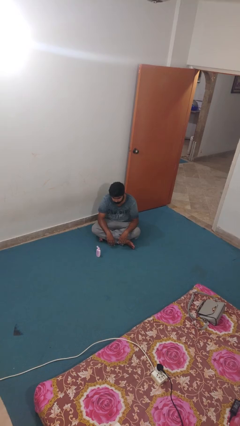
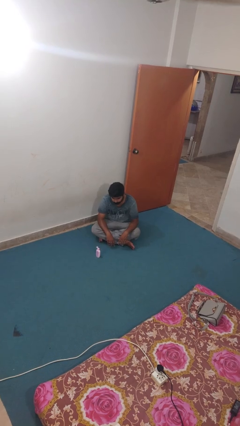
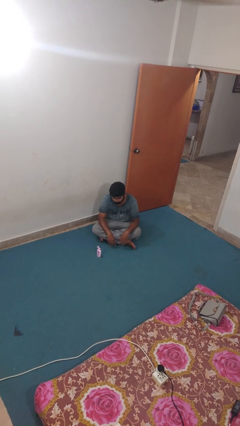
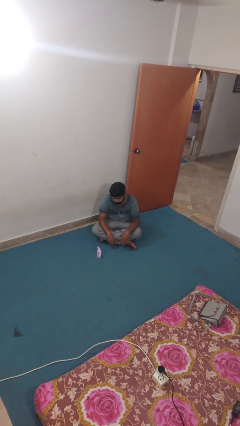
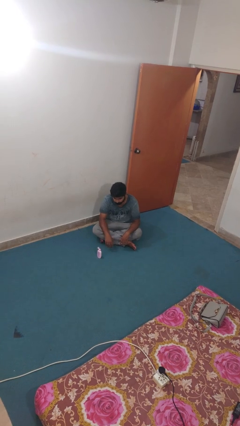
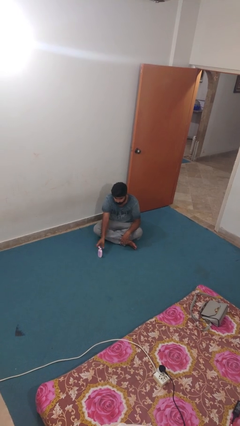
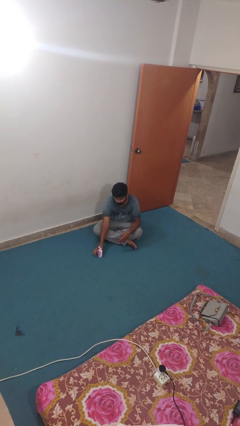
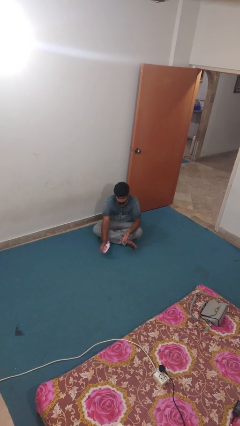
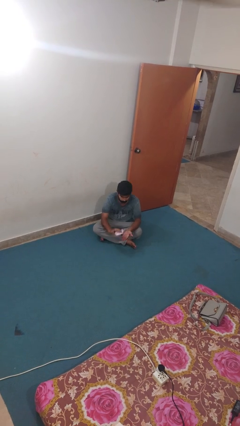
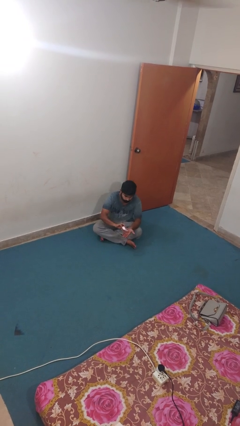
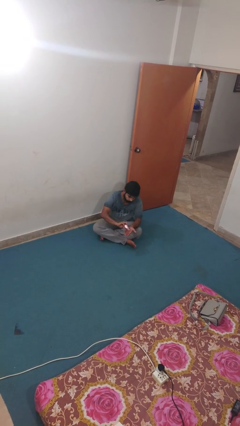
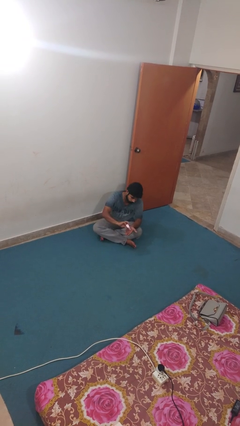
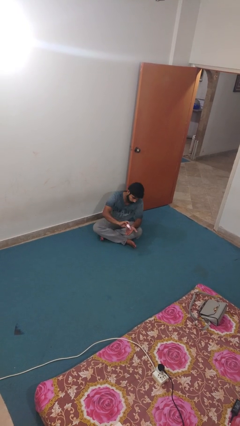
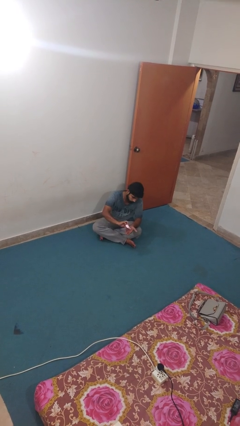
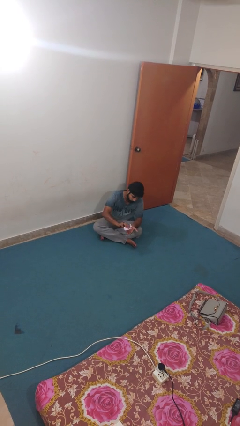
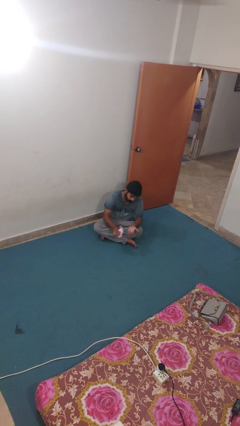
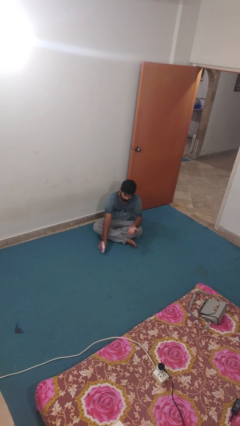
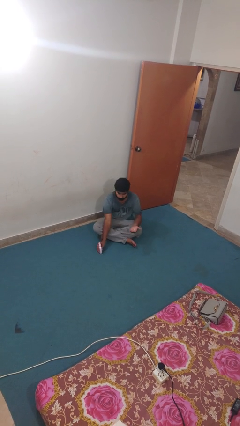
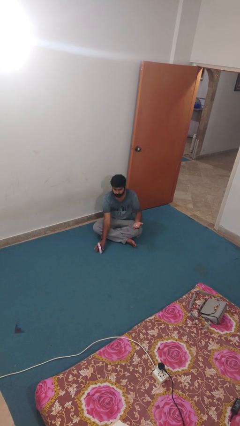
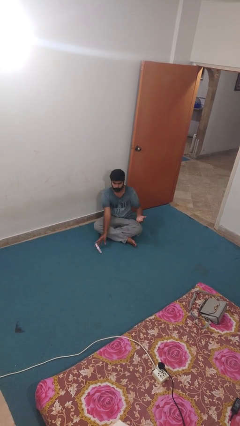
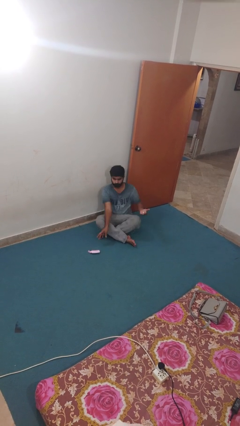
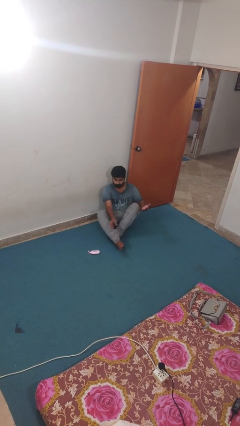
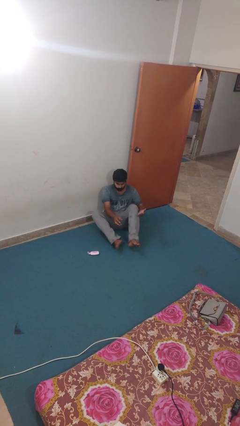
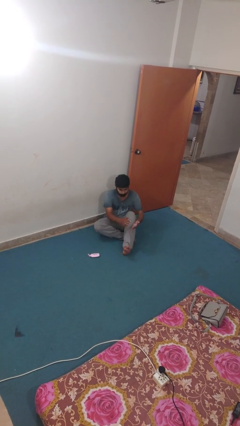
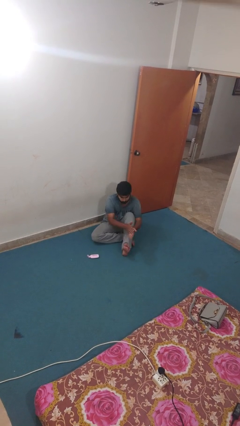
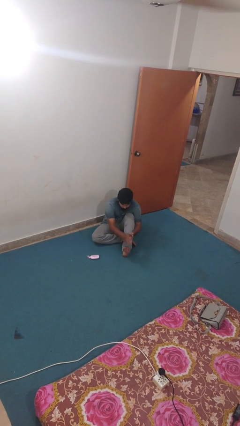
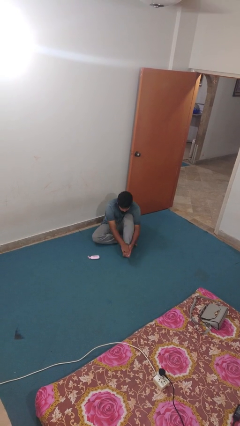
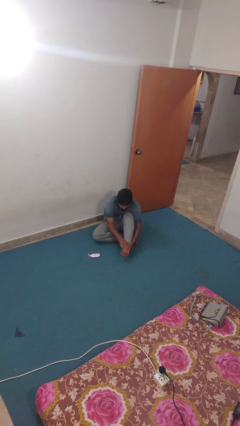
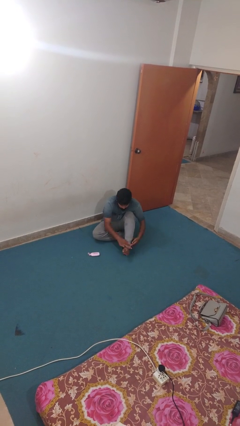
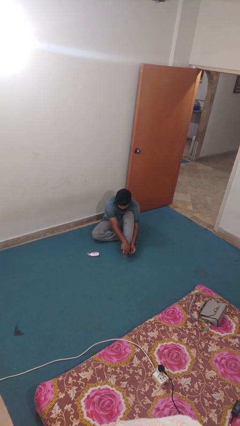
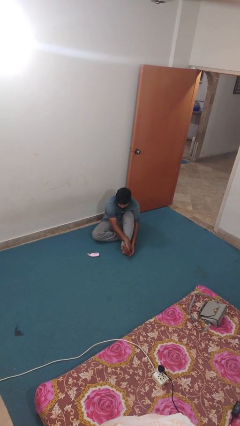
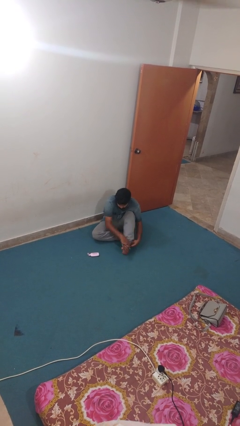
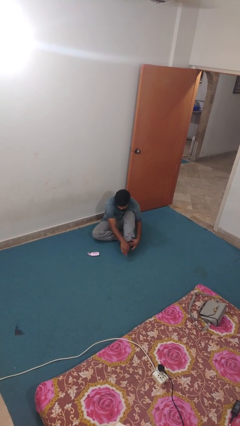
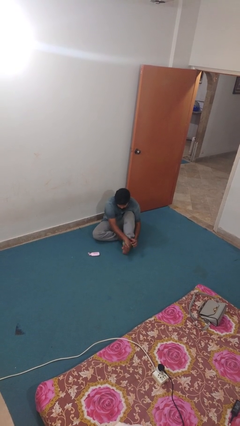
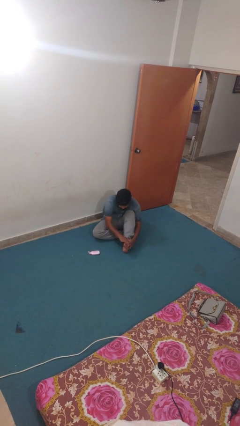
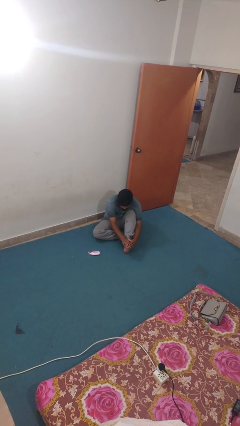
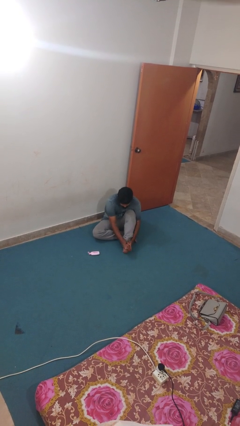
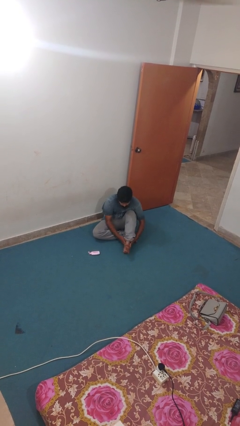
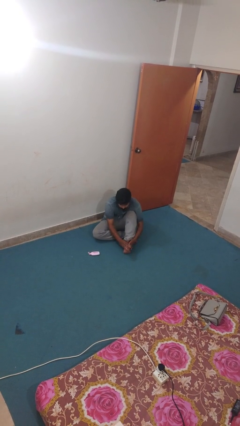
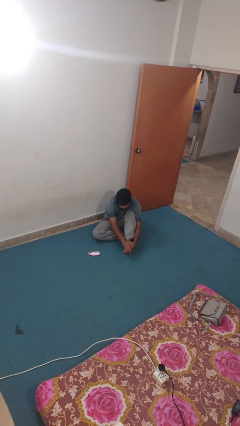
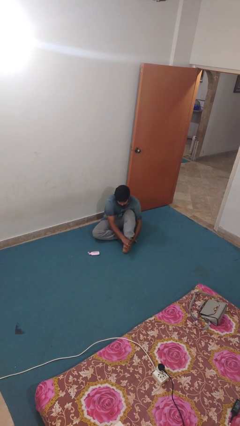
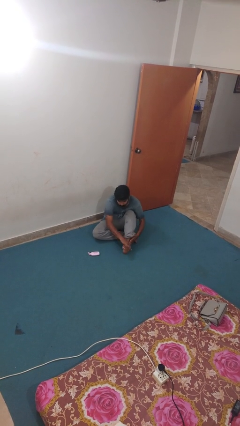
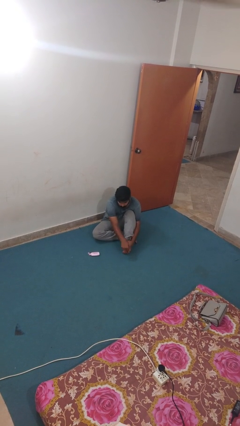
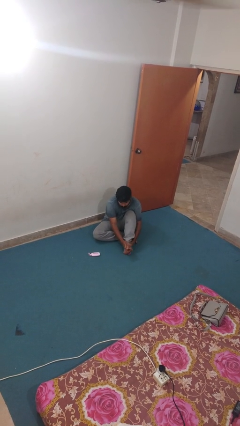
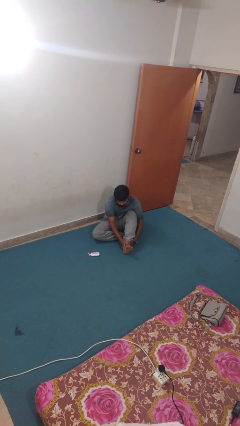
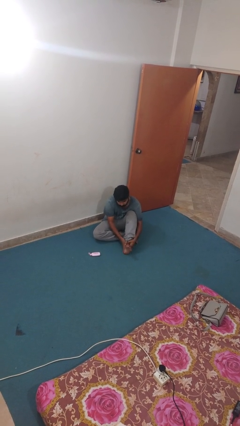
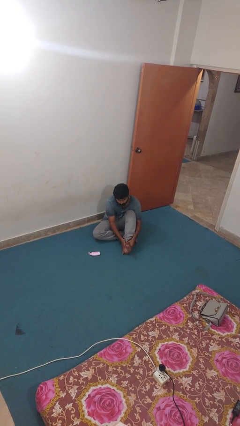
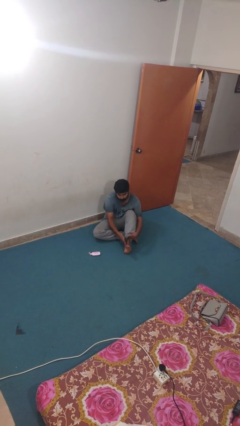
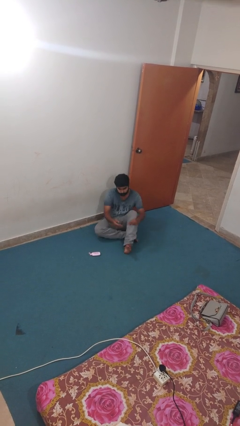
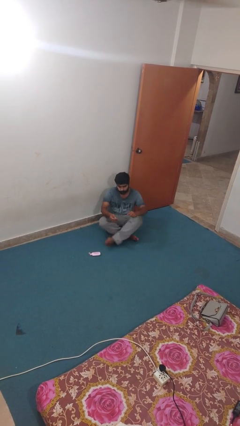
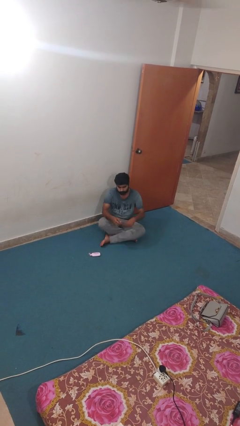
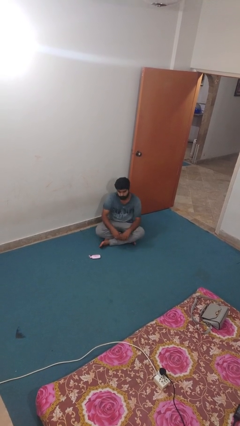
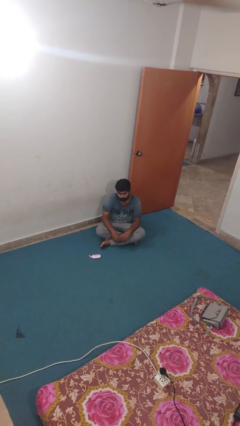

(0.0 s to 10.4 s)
person applies sunscreen

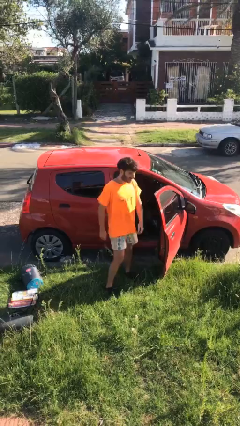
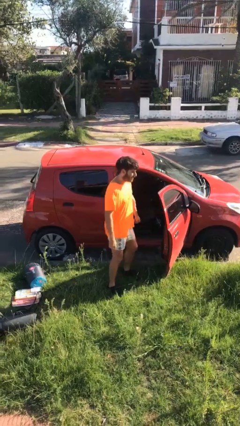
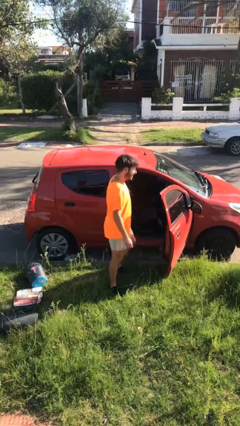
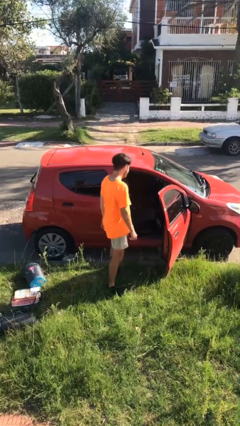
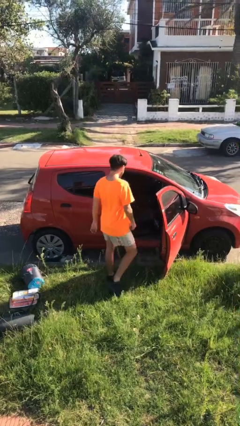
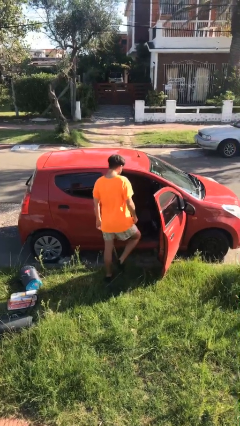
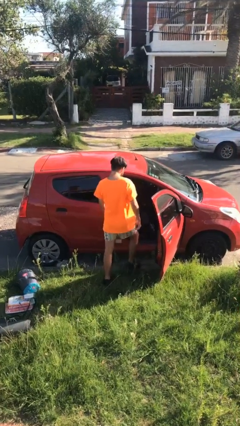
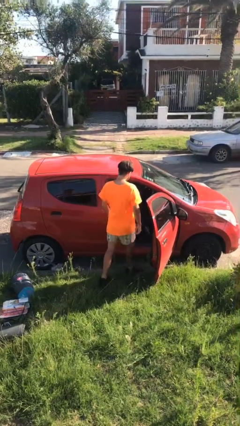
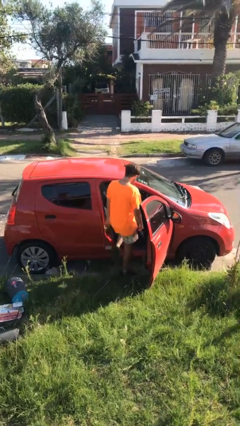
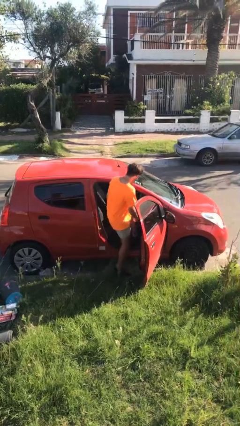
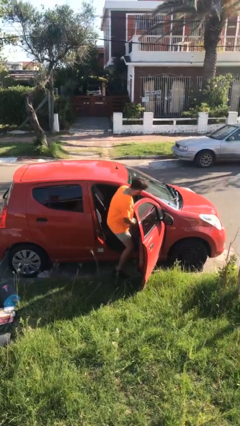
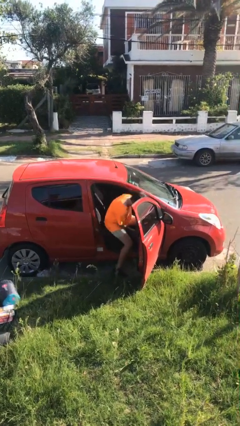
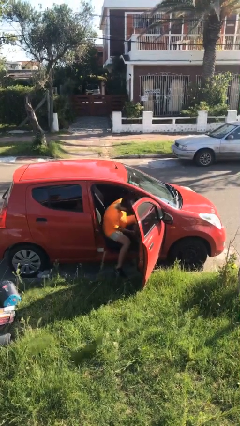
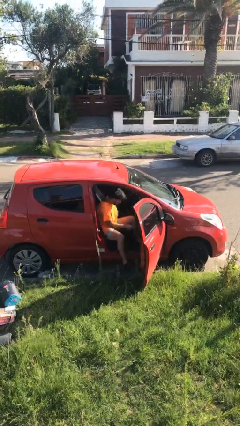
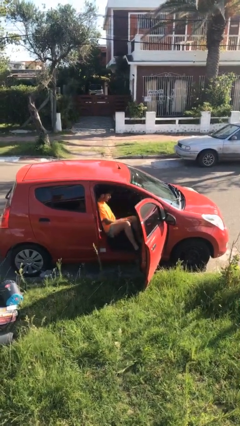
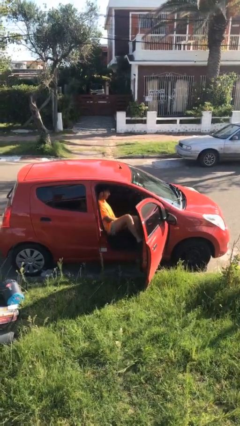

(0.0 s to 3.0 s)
person enters car

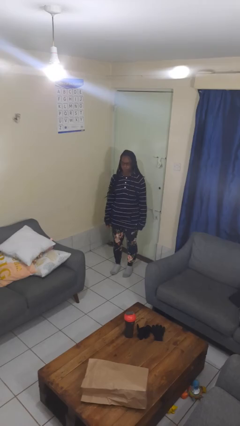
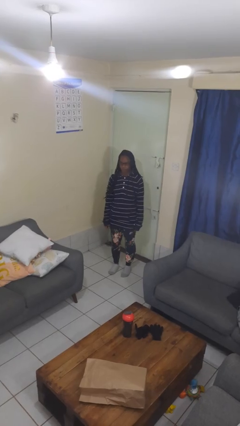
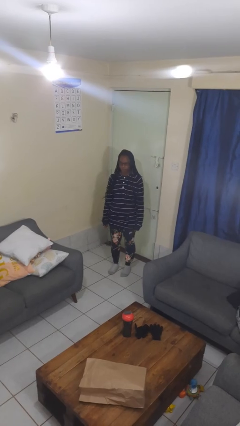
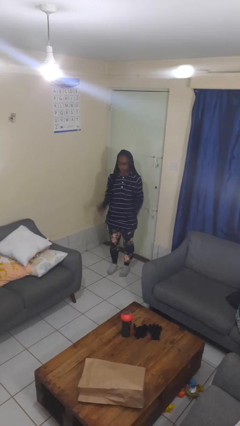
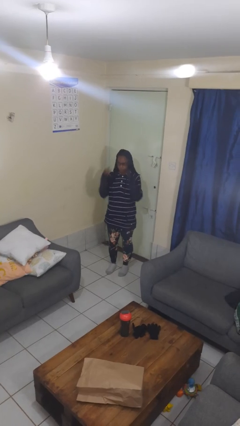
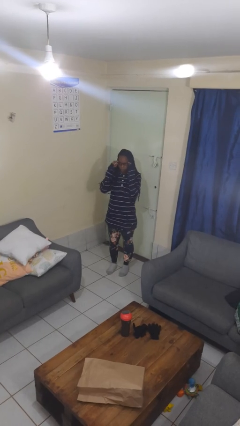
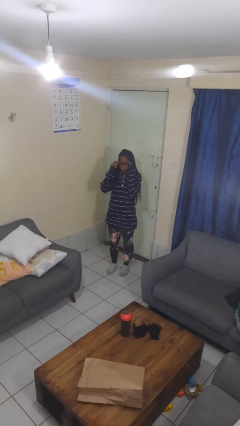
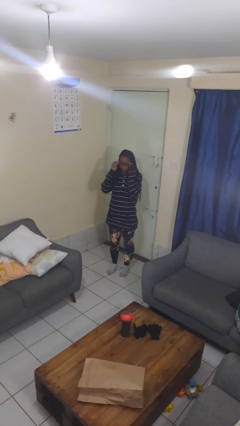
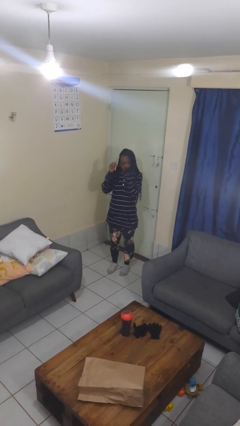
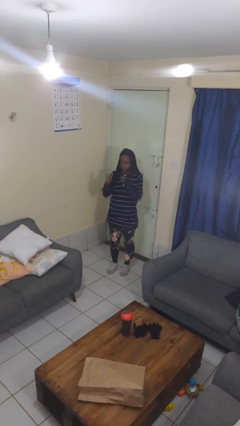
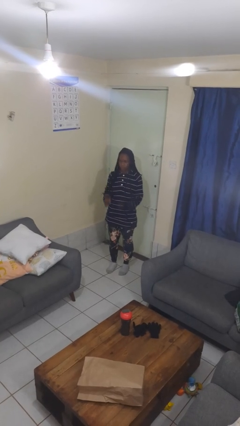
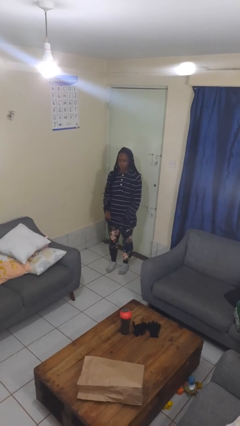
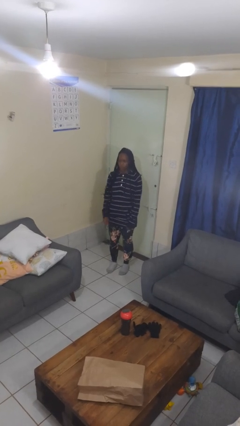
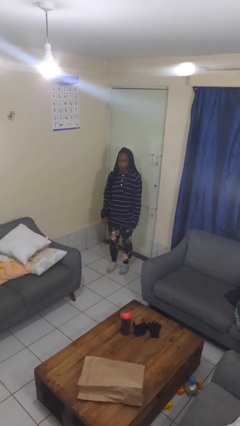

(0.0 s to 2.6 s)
person takes off glasses

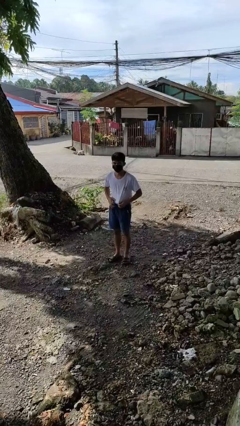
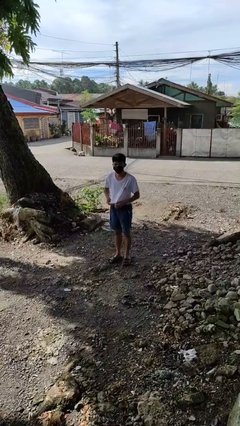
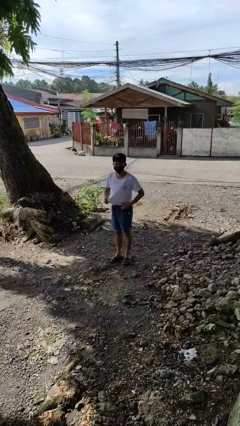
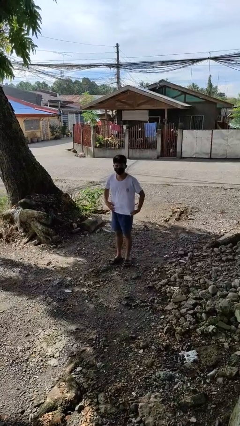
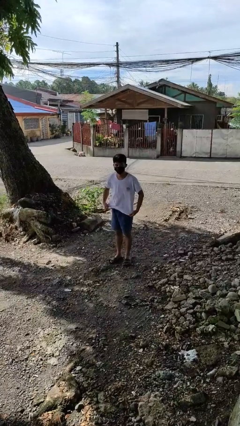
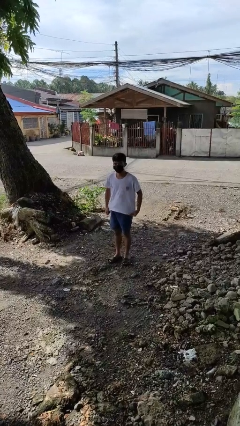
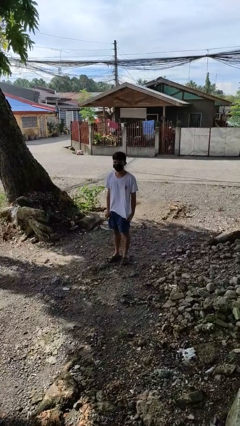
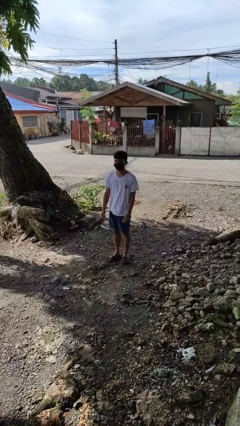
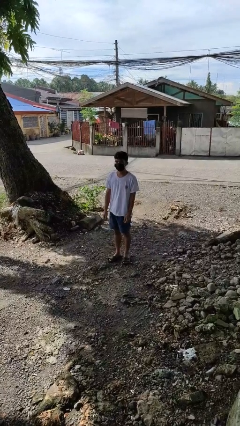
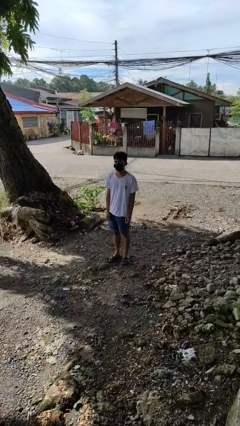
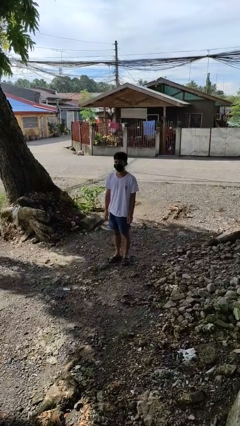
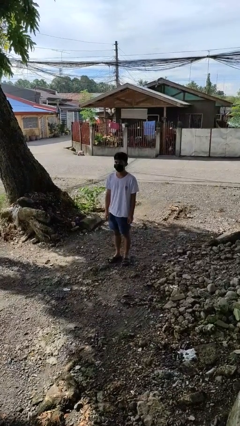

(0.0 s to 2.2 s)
person untucks shirt
